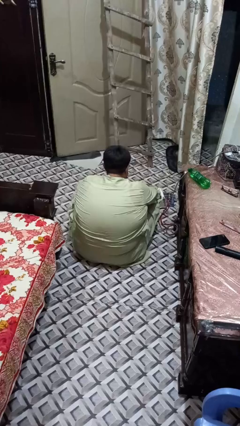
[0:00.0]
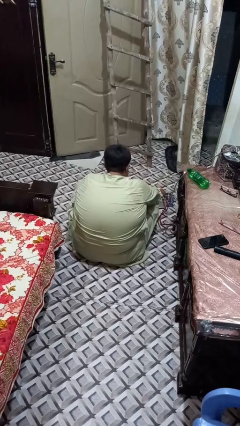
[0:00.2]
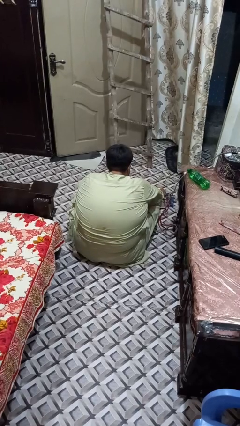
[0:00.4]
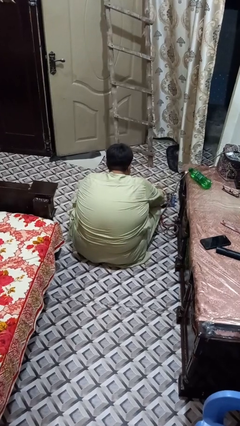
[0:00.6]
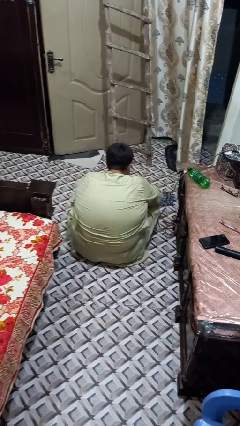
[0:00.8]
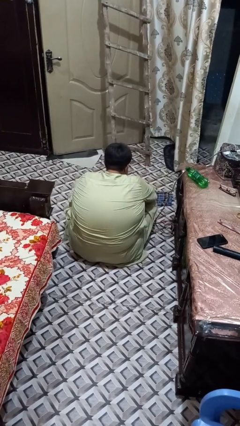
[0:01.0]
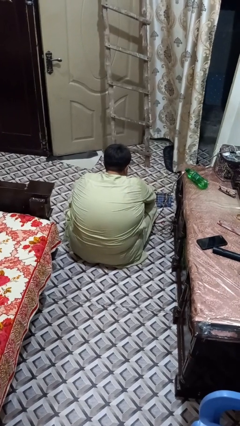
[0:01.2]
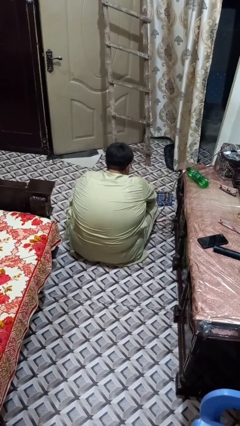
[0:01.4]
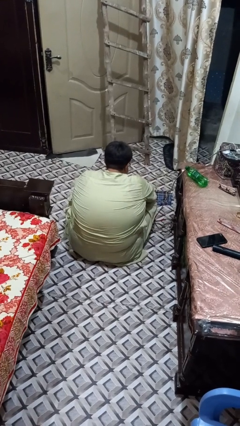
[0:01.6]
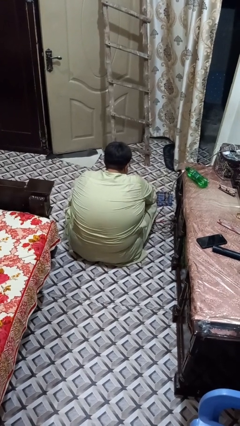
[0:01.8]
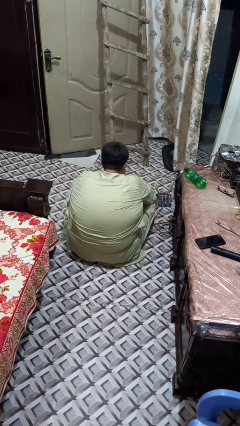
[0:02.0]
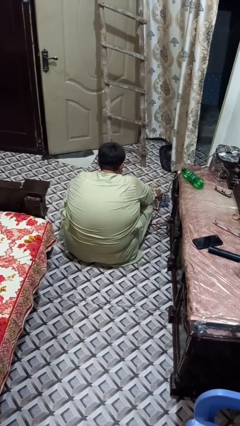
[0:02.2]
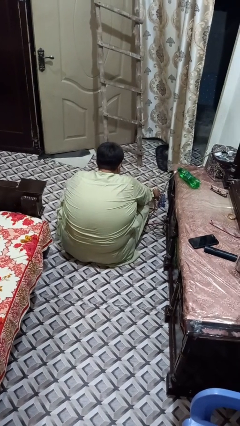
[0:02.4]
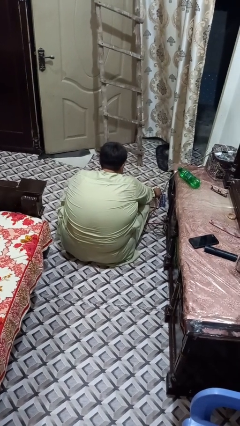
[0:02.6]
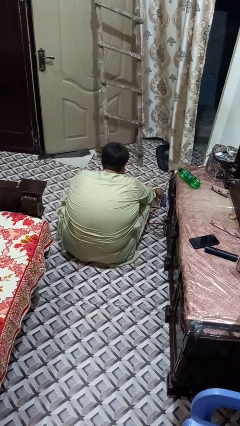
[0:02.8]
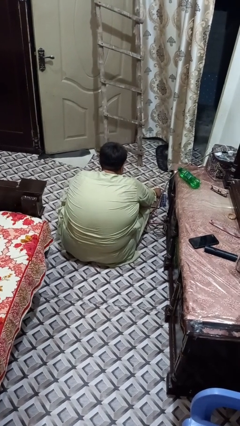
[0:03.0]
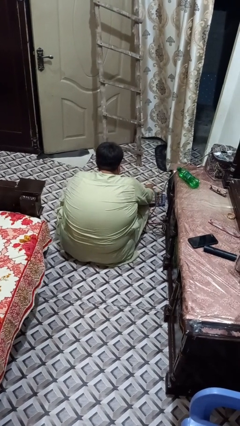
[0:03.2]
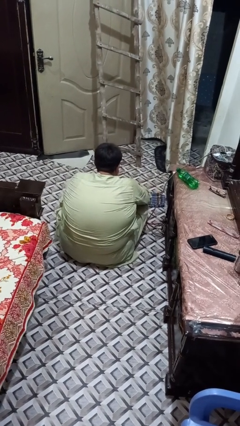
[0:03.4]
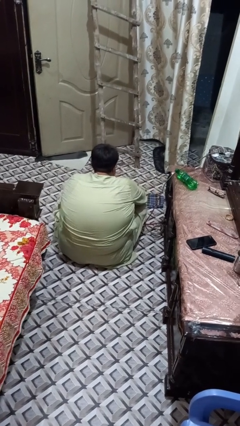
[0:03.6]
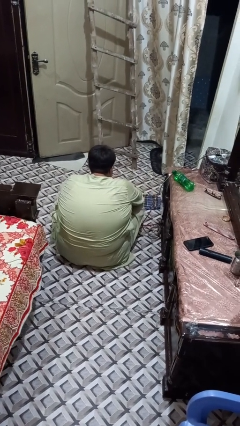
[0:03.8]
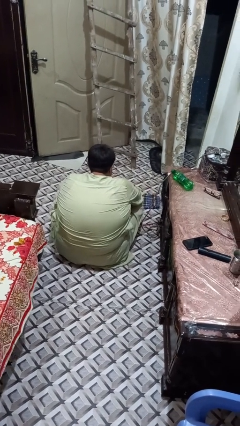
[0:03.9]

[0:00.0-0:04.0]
person irons clothes

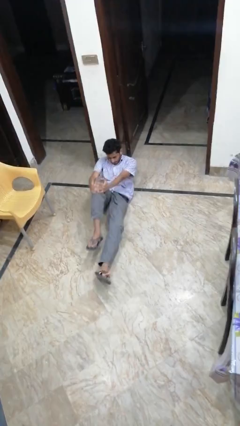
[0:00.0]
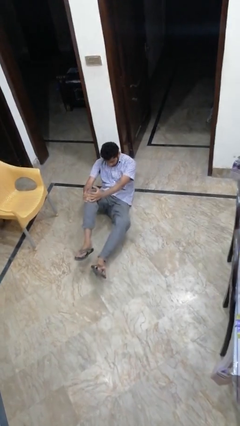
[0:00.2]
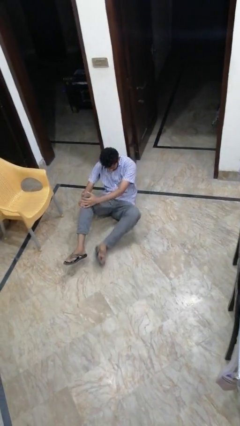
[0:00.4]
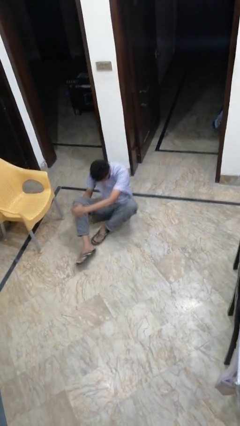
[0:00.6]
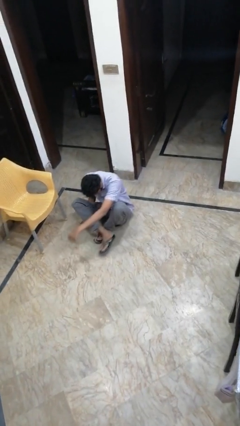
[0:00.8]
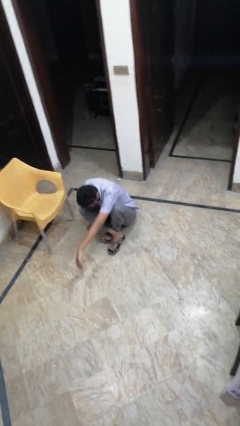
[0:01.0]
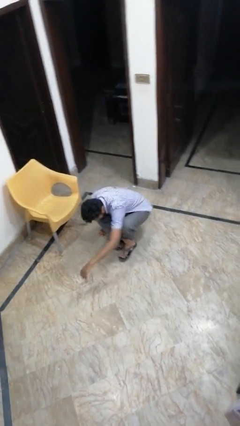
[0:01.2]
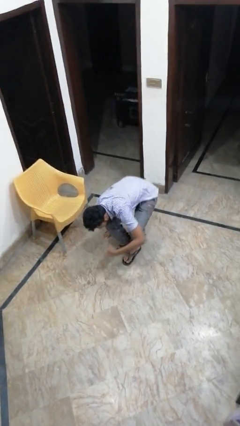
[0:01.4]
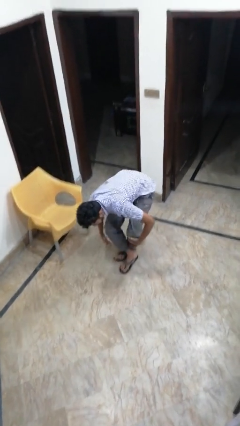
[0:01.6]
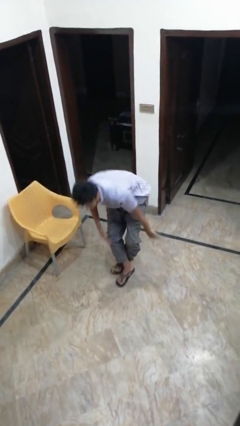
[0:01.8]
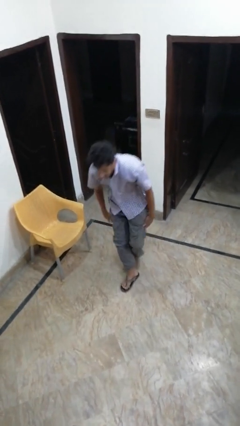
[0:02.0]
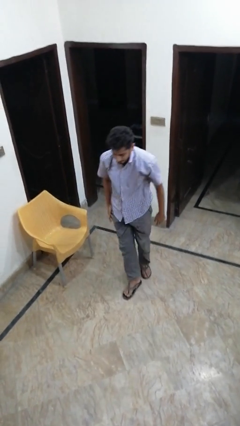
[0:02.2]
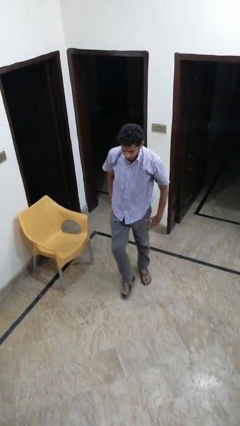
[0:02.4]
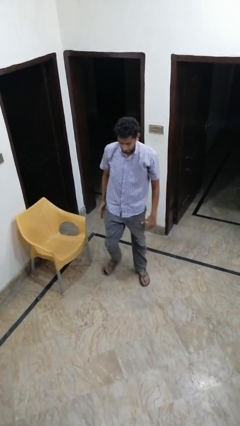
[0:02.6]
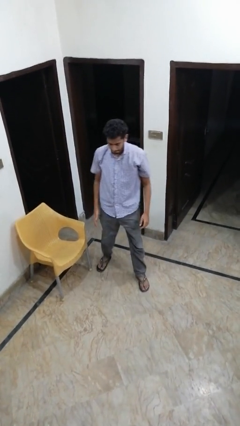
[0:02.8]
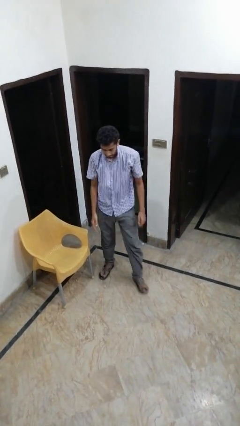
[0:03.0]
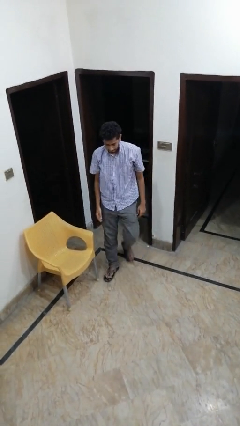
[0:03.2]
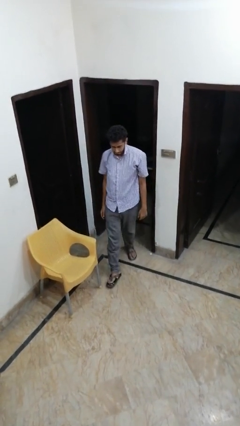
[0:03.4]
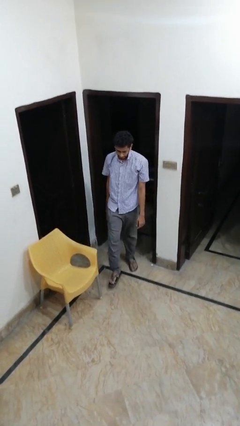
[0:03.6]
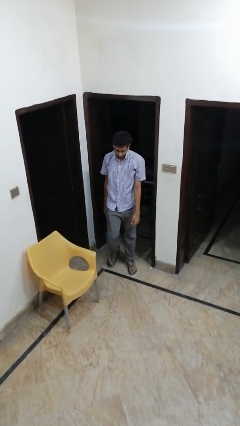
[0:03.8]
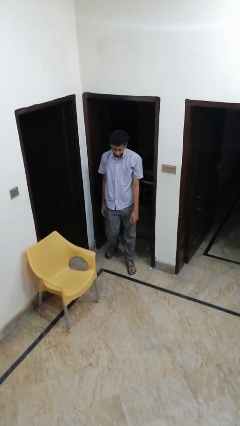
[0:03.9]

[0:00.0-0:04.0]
person stands up from floor

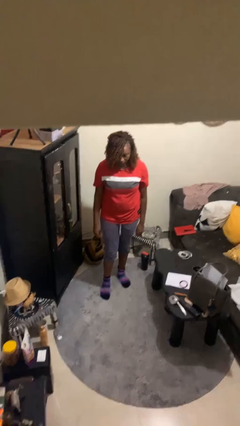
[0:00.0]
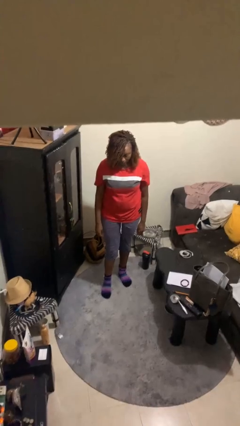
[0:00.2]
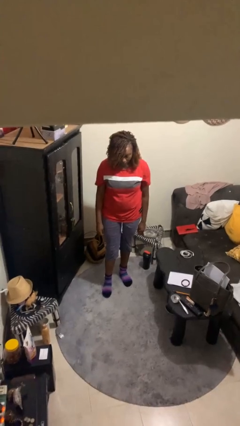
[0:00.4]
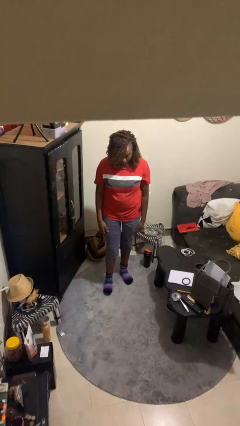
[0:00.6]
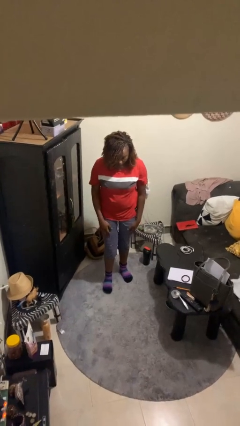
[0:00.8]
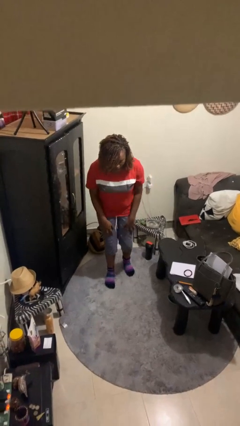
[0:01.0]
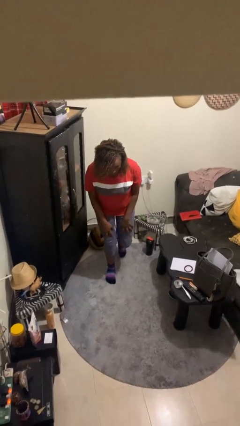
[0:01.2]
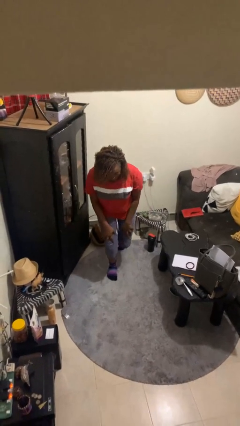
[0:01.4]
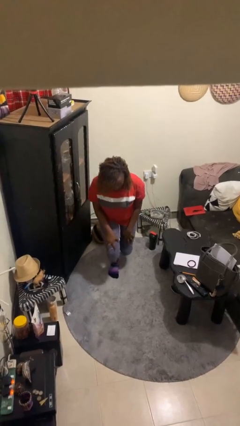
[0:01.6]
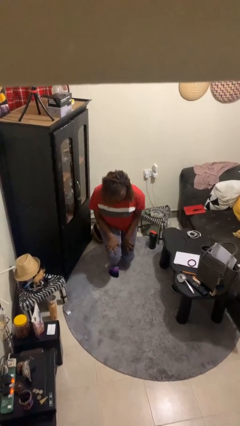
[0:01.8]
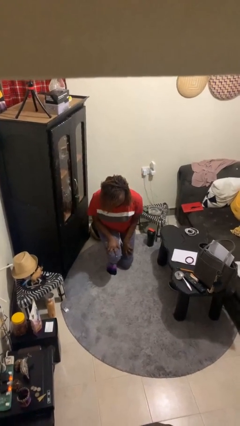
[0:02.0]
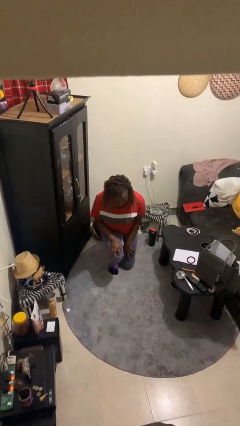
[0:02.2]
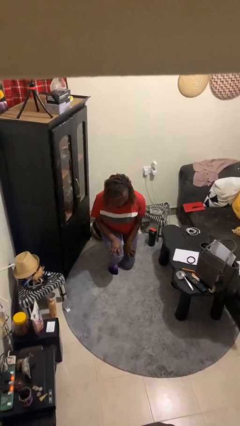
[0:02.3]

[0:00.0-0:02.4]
person kneels

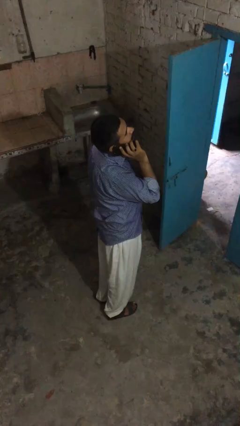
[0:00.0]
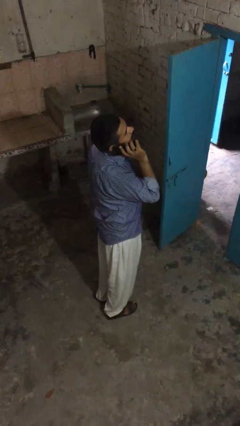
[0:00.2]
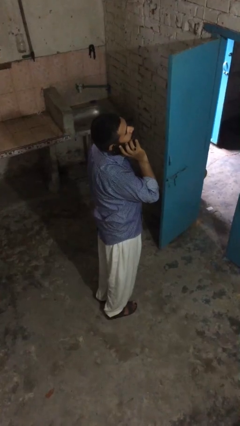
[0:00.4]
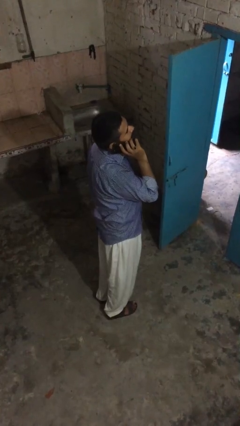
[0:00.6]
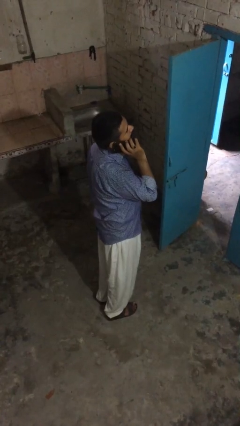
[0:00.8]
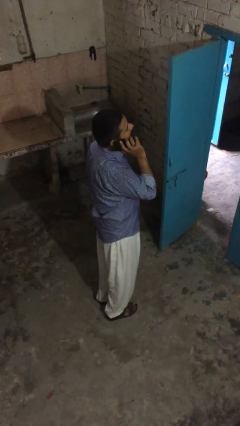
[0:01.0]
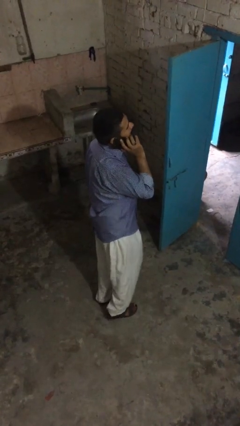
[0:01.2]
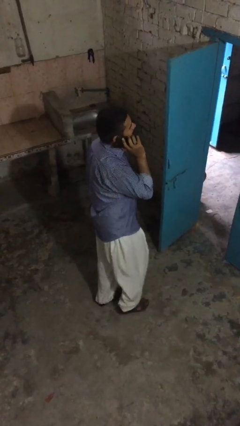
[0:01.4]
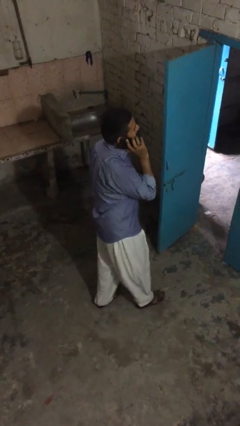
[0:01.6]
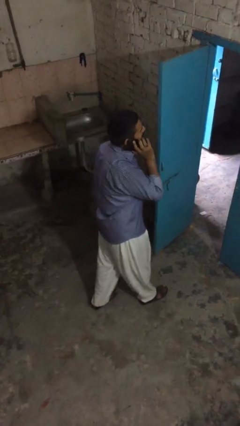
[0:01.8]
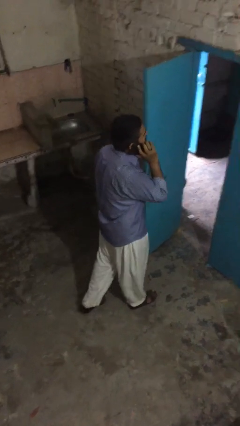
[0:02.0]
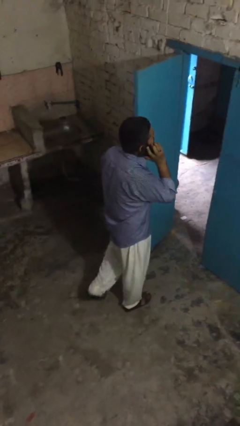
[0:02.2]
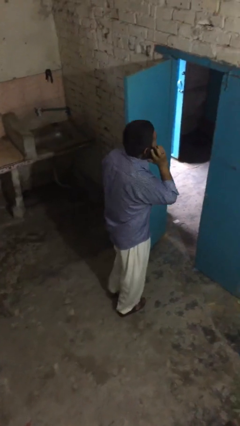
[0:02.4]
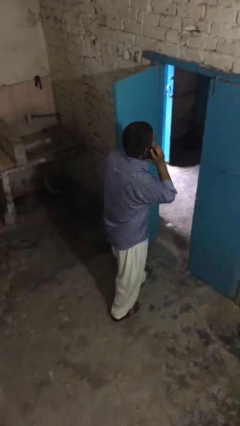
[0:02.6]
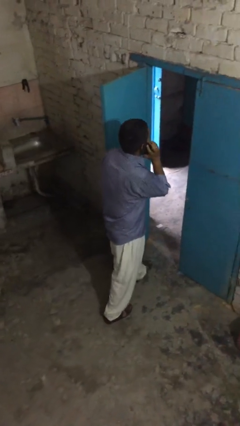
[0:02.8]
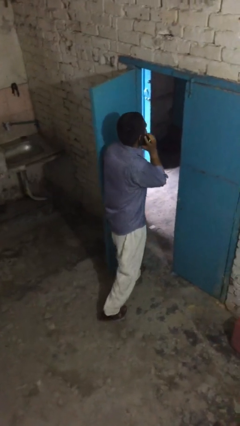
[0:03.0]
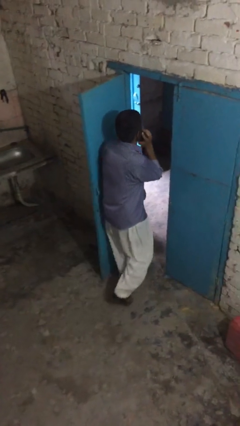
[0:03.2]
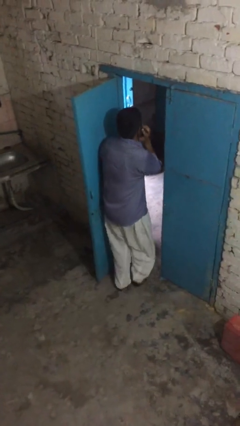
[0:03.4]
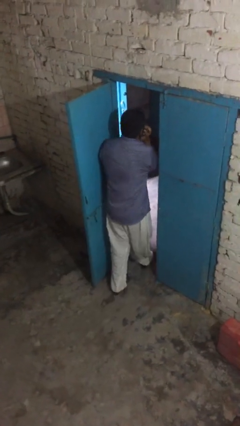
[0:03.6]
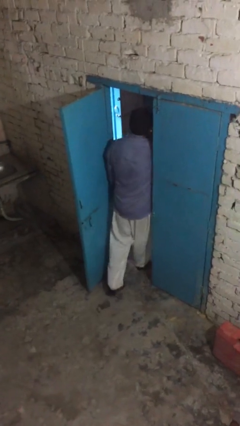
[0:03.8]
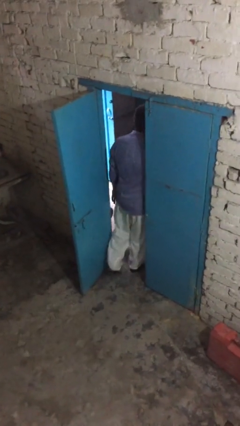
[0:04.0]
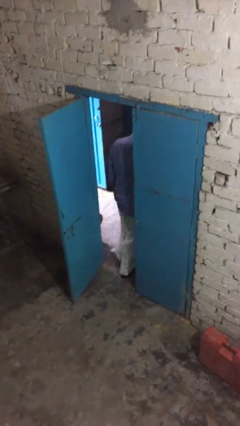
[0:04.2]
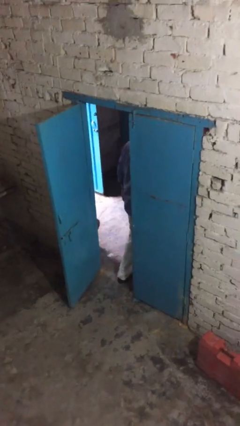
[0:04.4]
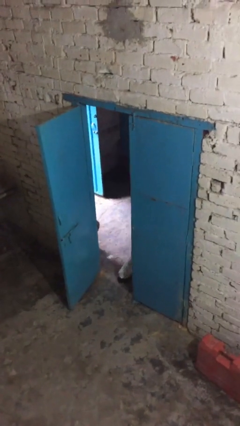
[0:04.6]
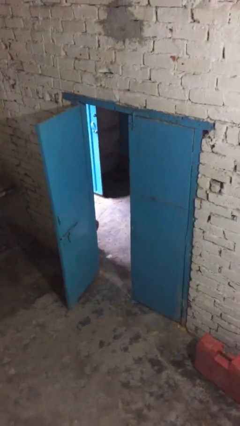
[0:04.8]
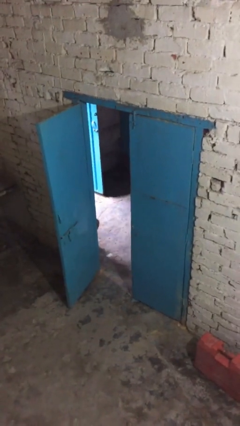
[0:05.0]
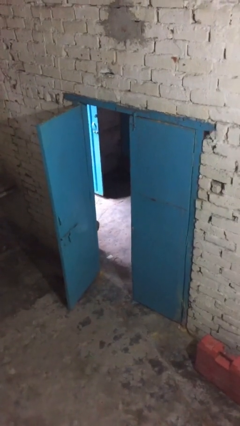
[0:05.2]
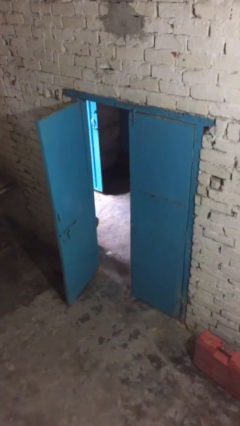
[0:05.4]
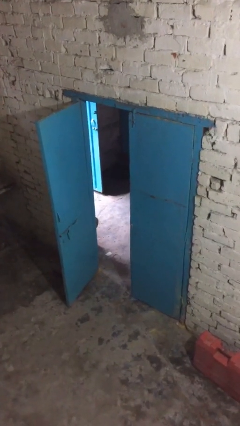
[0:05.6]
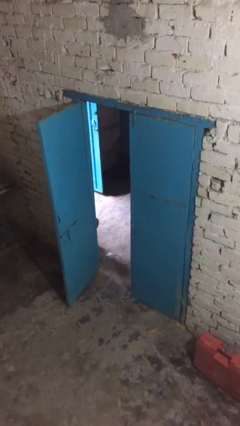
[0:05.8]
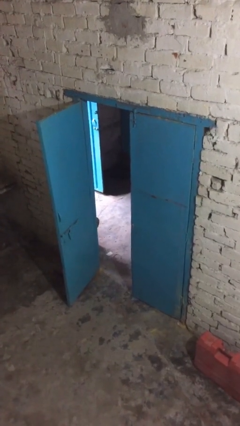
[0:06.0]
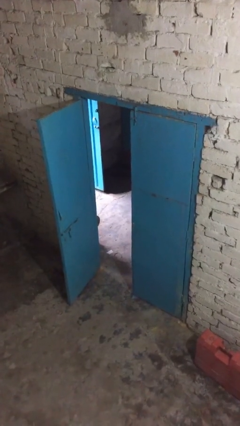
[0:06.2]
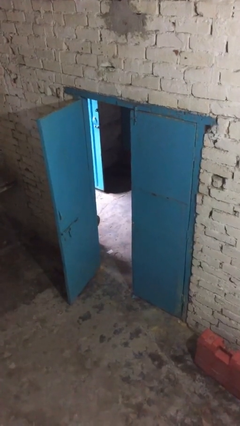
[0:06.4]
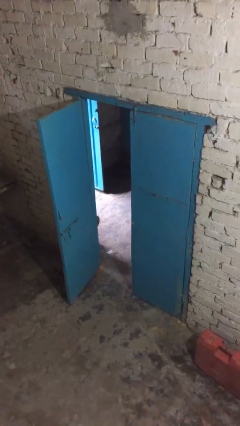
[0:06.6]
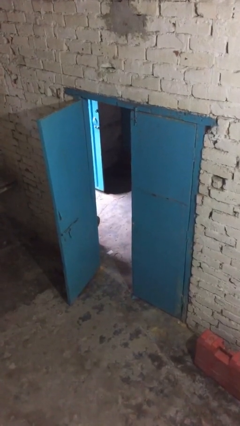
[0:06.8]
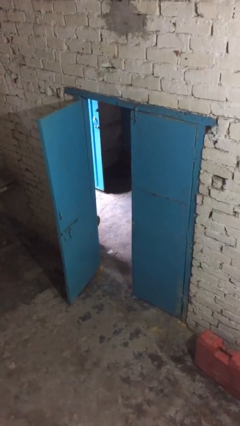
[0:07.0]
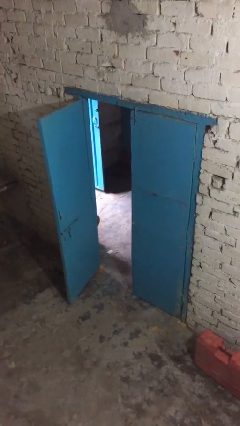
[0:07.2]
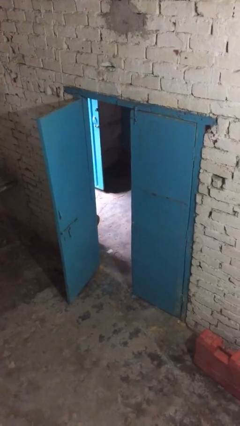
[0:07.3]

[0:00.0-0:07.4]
person exits scene through structure
